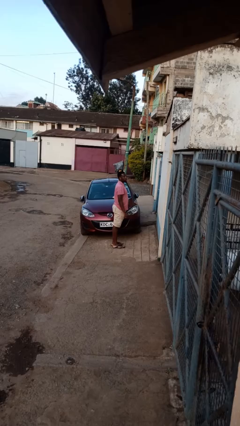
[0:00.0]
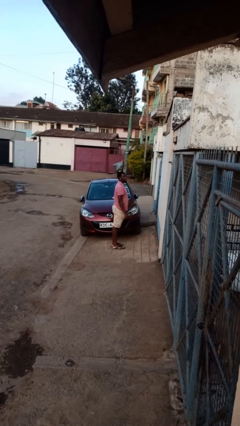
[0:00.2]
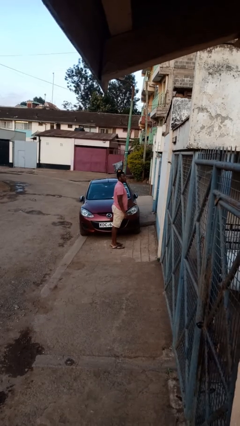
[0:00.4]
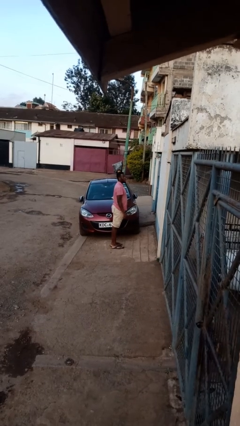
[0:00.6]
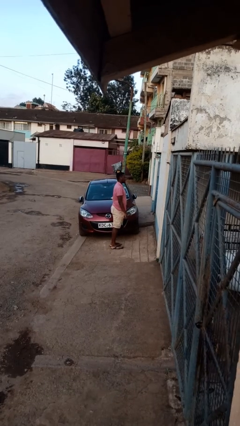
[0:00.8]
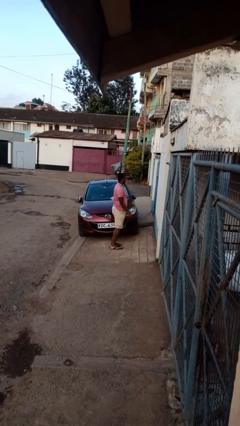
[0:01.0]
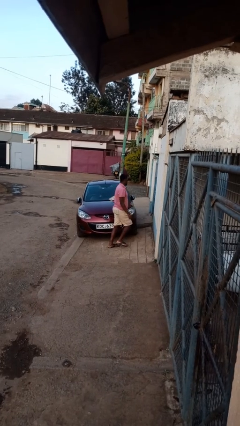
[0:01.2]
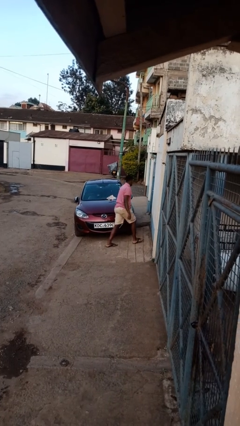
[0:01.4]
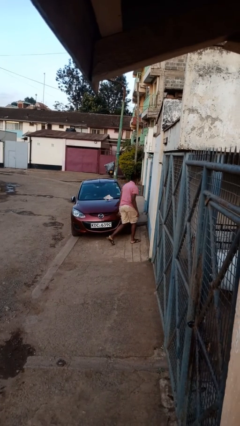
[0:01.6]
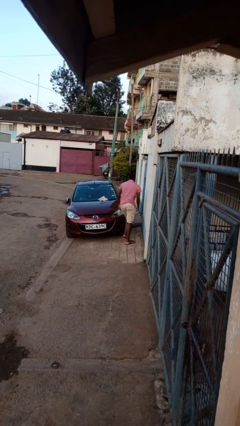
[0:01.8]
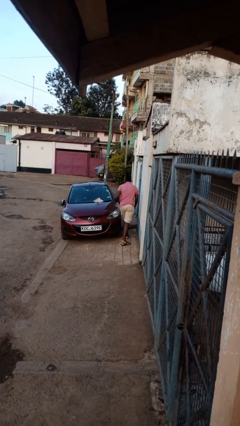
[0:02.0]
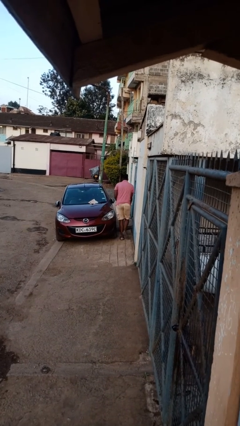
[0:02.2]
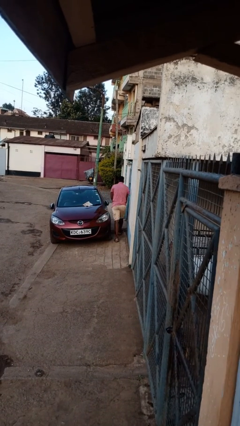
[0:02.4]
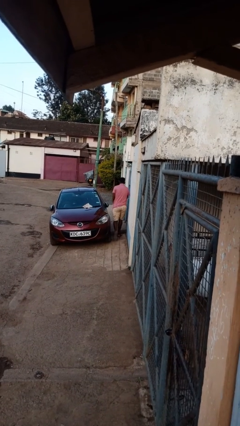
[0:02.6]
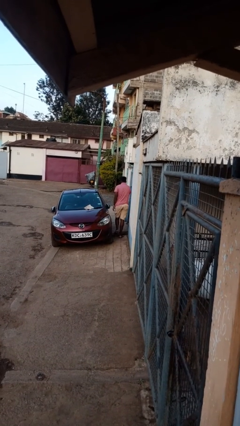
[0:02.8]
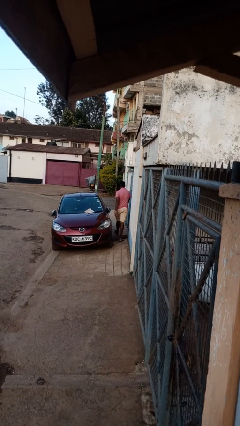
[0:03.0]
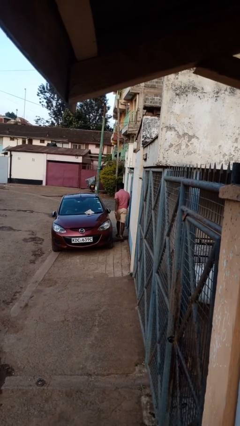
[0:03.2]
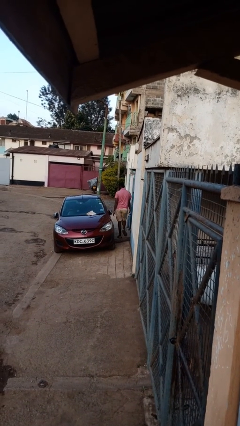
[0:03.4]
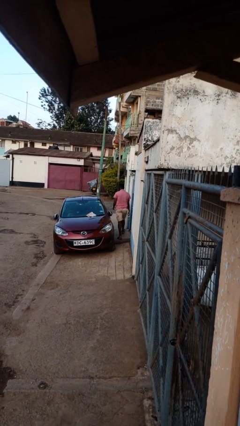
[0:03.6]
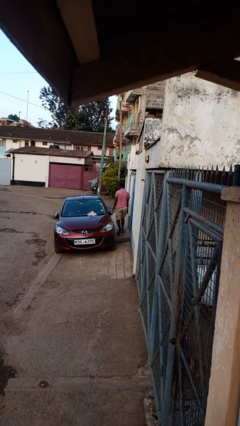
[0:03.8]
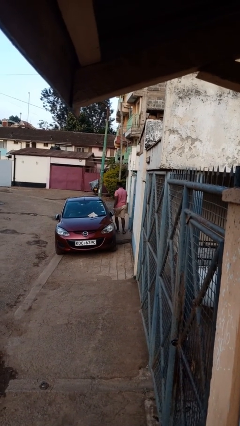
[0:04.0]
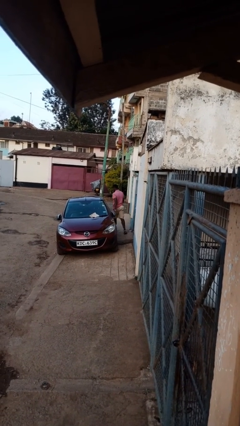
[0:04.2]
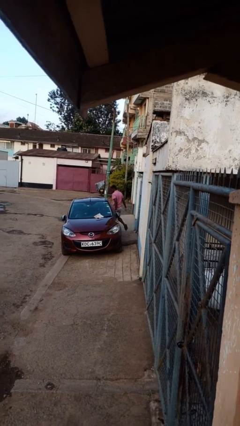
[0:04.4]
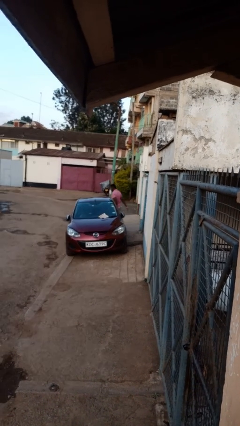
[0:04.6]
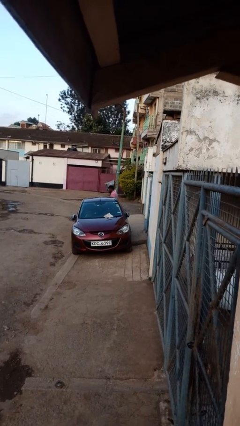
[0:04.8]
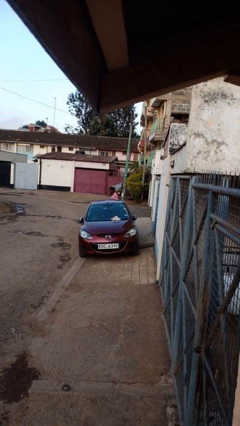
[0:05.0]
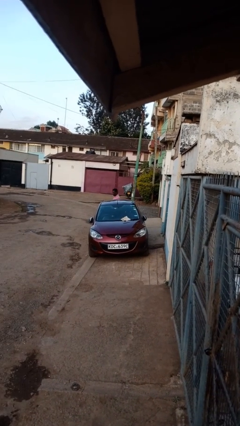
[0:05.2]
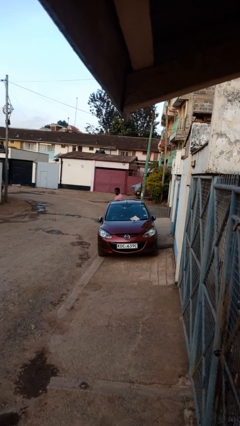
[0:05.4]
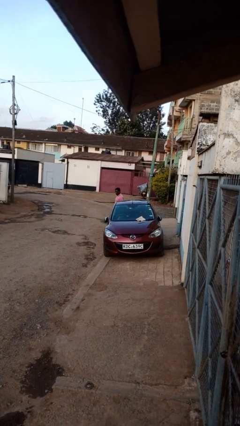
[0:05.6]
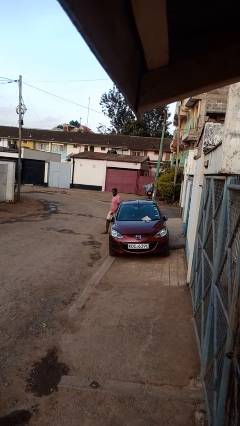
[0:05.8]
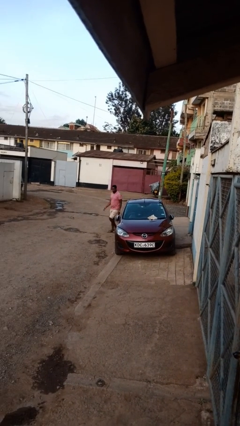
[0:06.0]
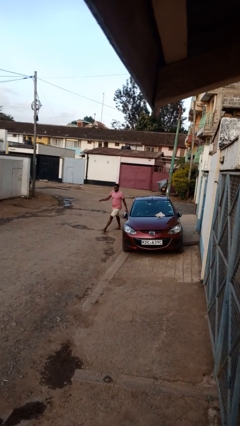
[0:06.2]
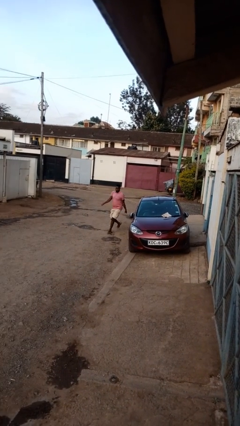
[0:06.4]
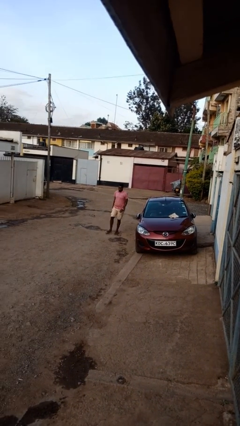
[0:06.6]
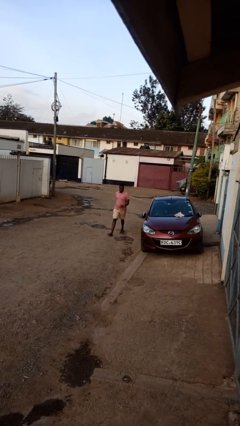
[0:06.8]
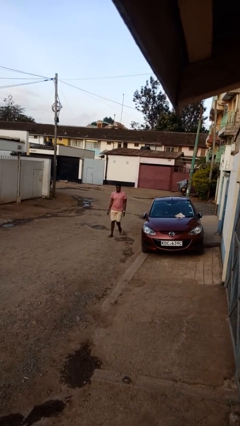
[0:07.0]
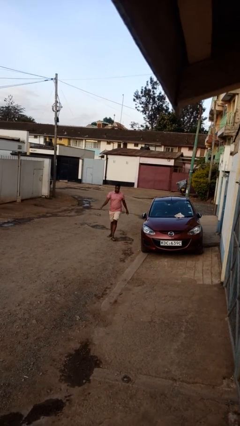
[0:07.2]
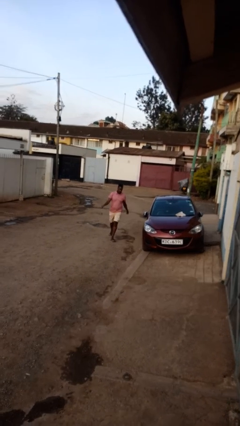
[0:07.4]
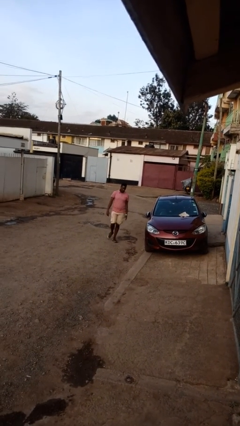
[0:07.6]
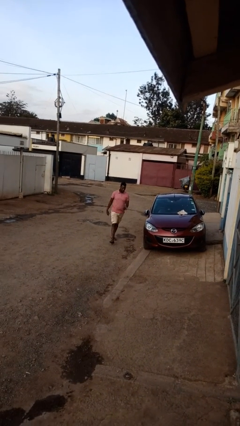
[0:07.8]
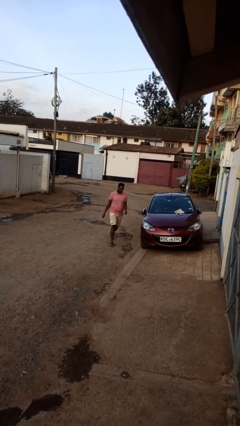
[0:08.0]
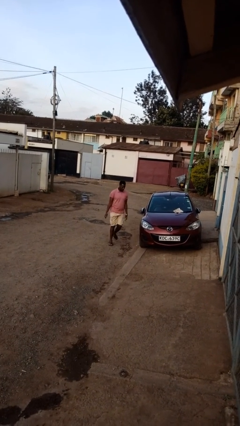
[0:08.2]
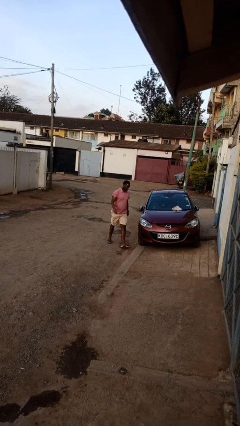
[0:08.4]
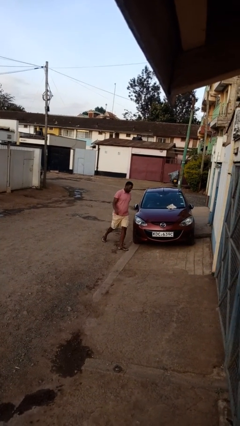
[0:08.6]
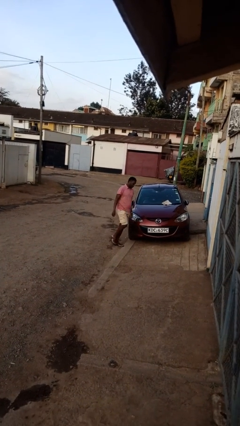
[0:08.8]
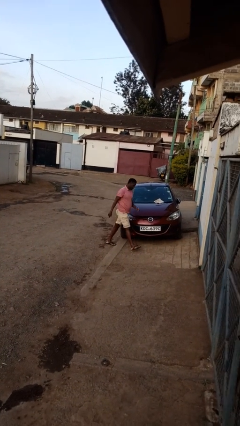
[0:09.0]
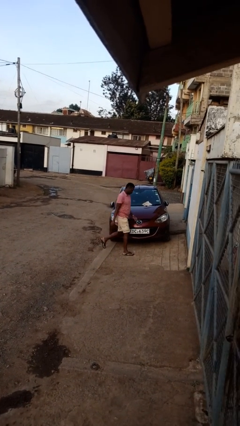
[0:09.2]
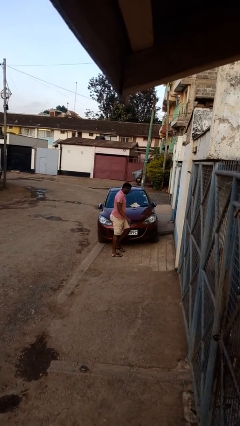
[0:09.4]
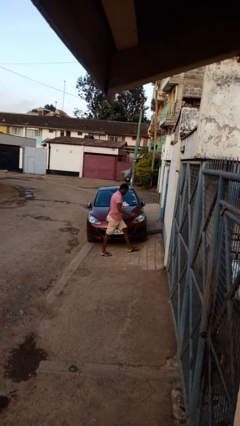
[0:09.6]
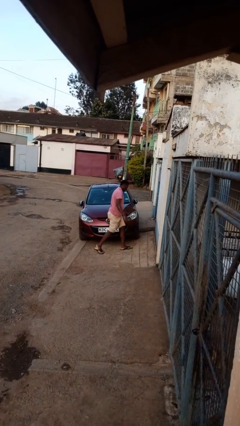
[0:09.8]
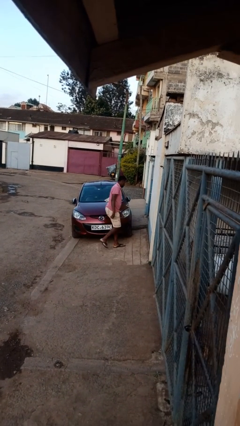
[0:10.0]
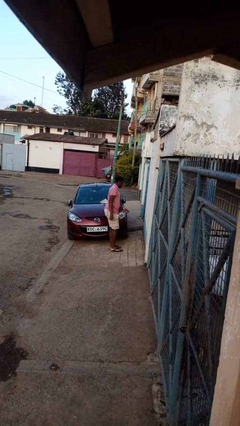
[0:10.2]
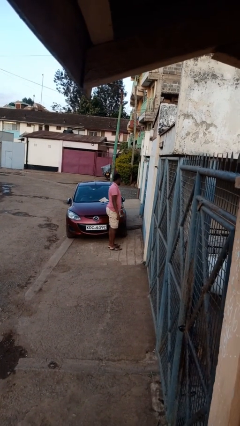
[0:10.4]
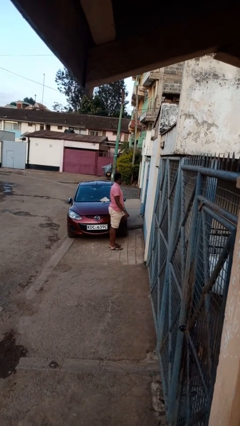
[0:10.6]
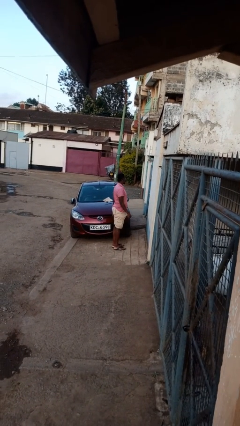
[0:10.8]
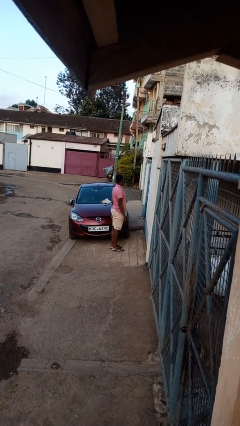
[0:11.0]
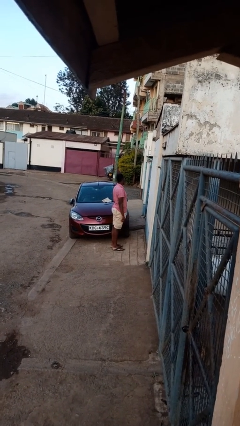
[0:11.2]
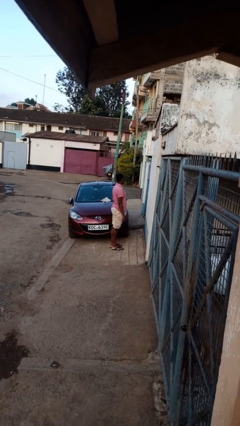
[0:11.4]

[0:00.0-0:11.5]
person walks around car

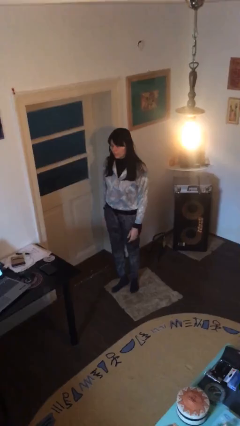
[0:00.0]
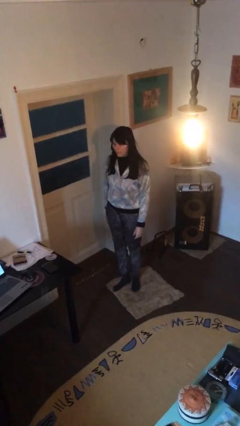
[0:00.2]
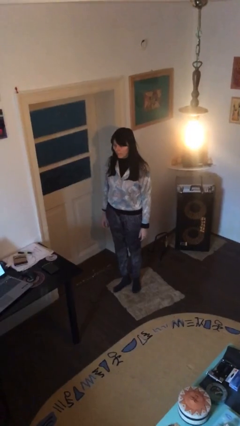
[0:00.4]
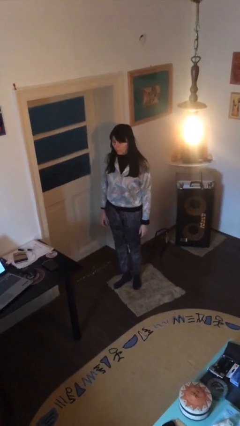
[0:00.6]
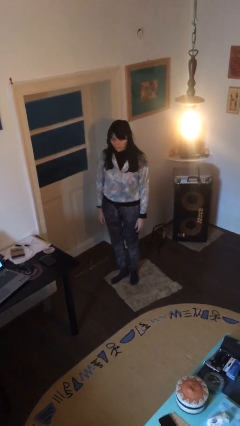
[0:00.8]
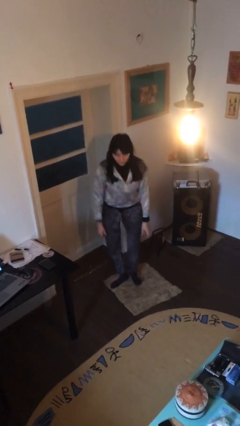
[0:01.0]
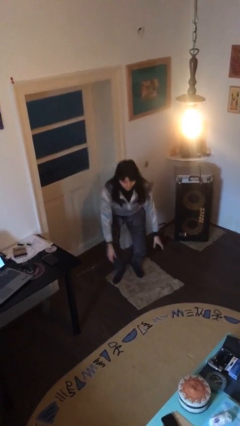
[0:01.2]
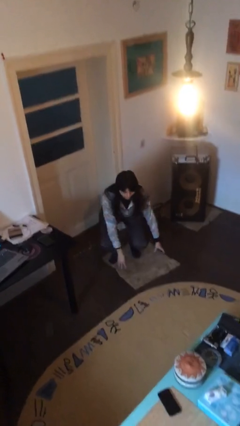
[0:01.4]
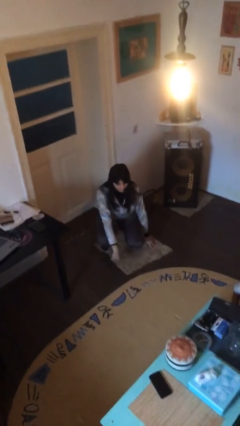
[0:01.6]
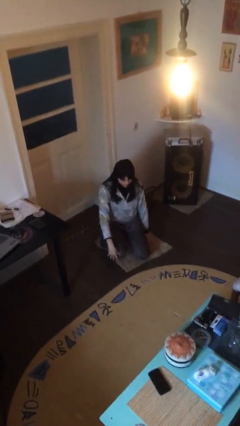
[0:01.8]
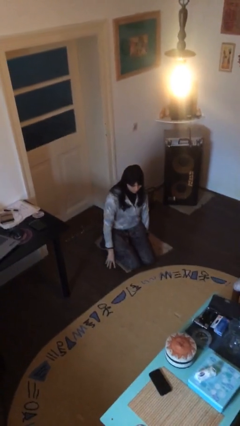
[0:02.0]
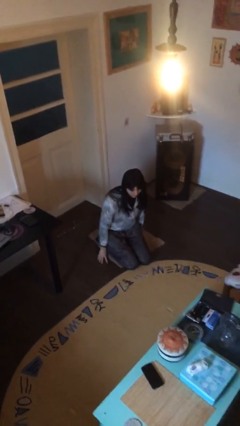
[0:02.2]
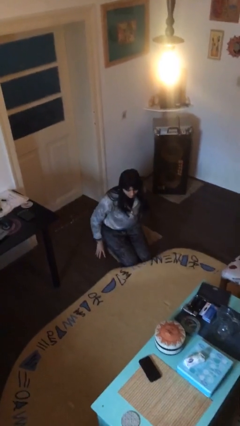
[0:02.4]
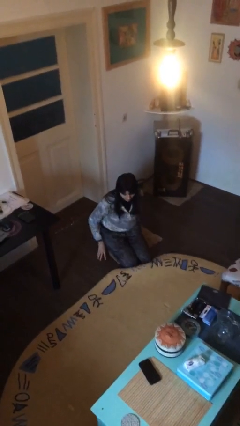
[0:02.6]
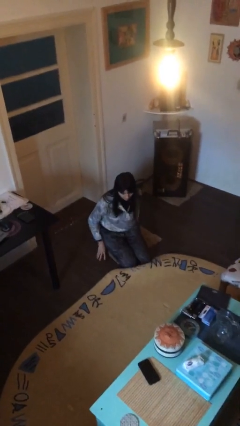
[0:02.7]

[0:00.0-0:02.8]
person sits down

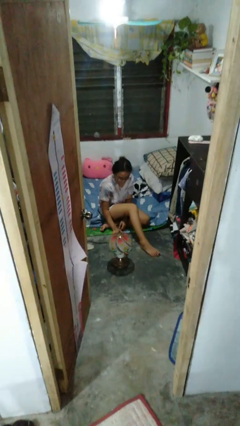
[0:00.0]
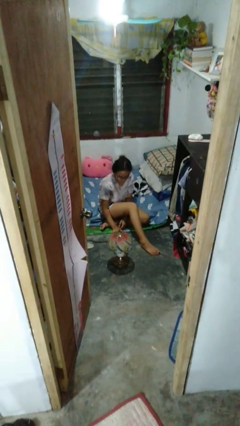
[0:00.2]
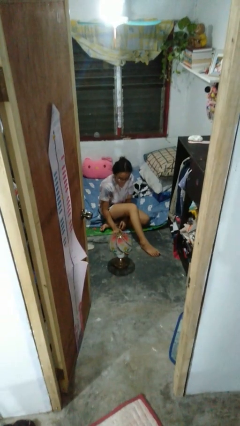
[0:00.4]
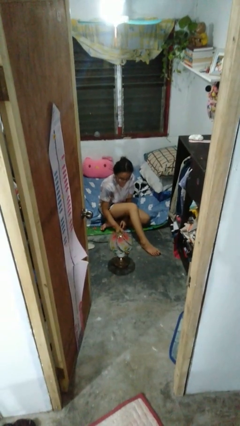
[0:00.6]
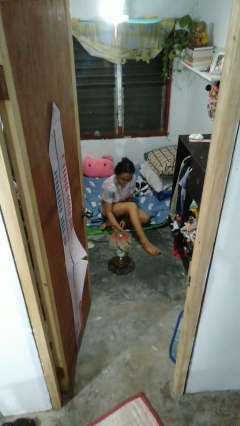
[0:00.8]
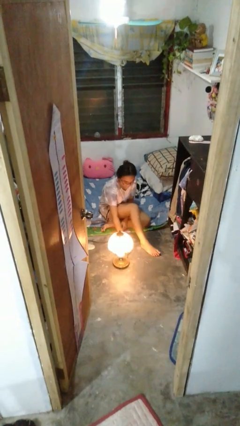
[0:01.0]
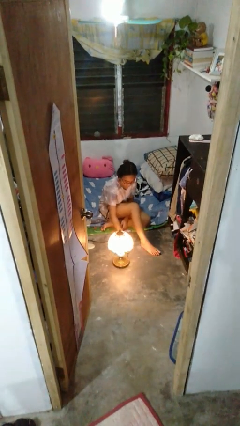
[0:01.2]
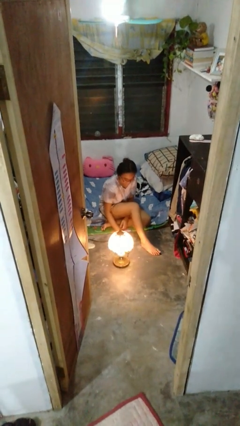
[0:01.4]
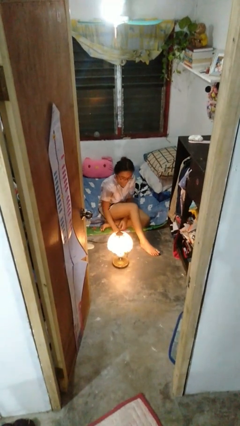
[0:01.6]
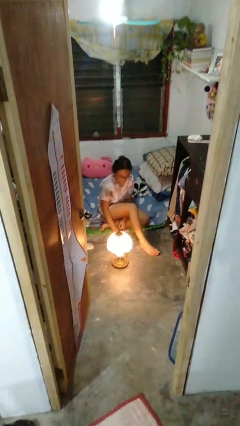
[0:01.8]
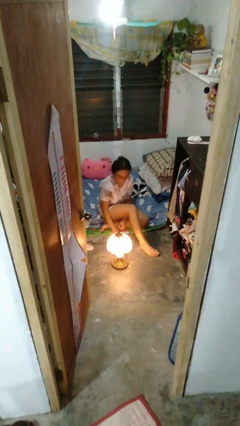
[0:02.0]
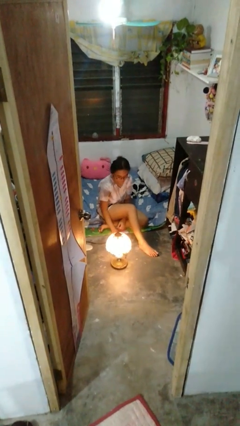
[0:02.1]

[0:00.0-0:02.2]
person turns on lamp

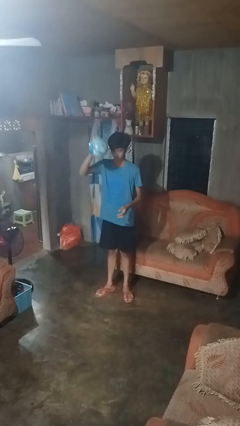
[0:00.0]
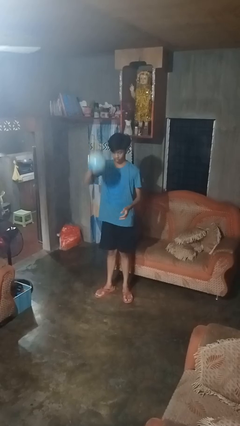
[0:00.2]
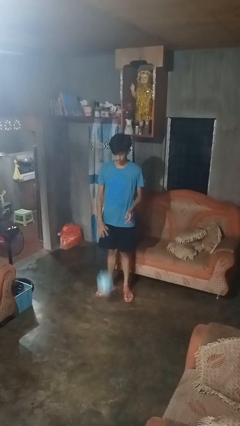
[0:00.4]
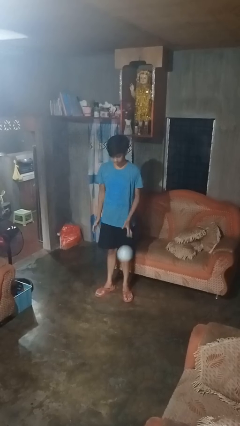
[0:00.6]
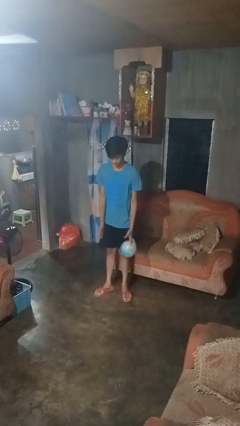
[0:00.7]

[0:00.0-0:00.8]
person bounces ball on floor

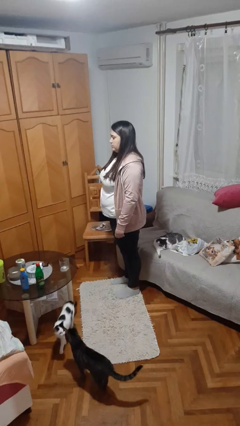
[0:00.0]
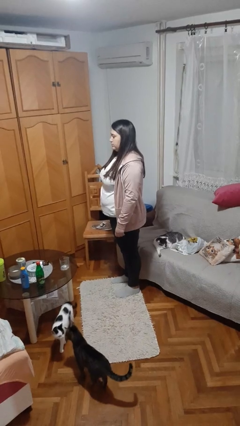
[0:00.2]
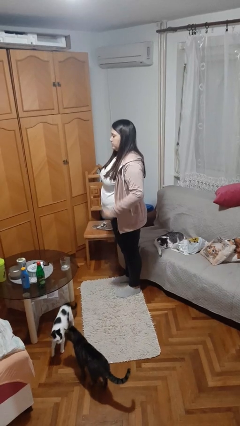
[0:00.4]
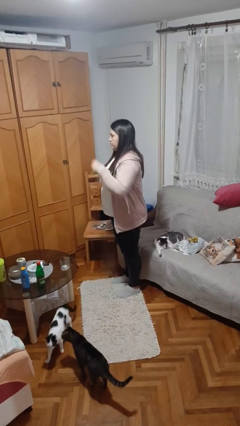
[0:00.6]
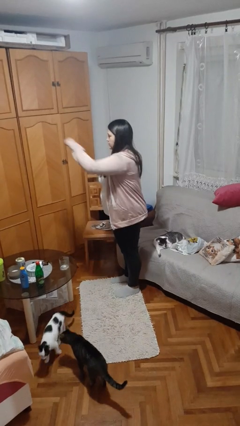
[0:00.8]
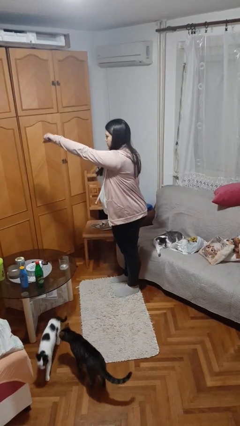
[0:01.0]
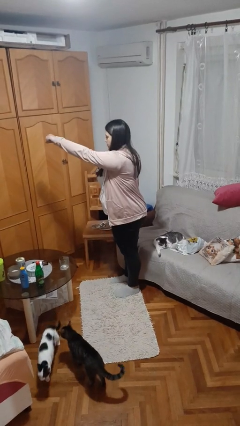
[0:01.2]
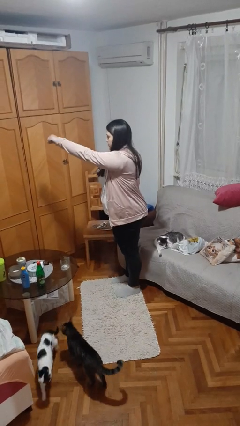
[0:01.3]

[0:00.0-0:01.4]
person punches
